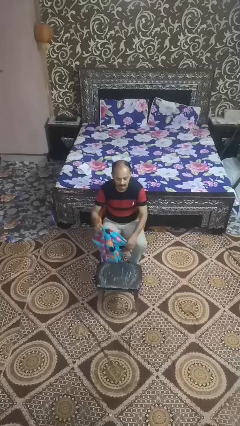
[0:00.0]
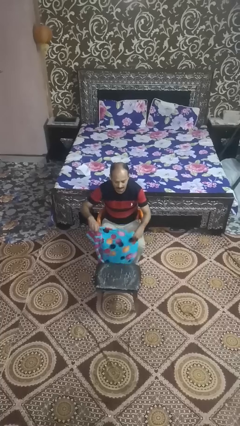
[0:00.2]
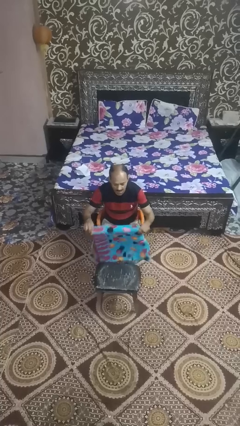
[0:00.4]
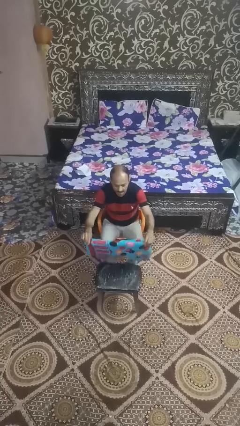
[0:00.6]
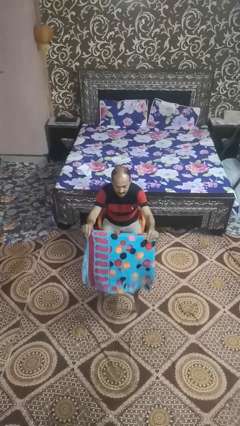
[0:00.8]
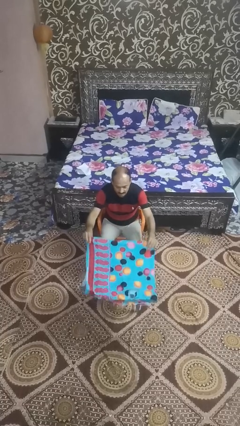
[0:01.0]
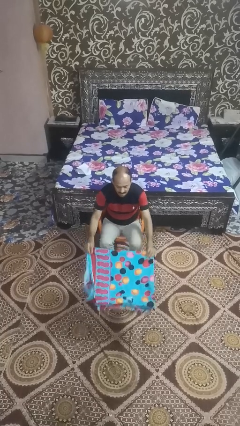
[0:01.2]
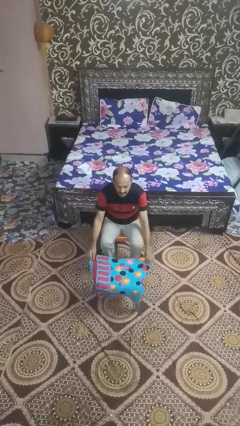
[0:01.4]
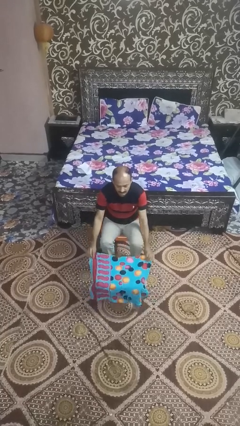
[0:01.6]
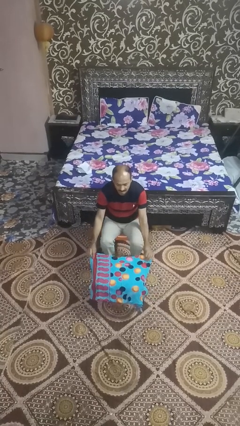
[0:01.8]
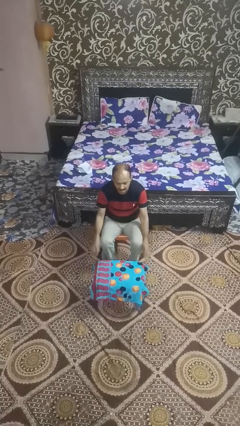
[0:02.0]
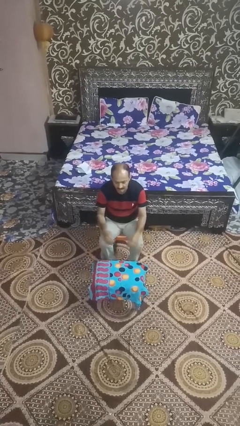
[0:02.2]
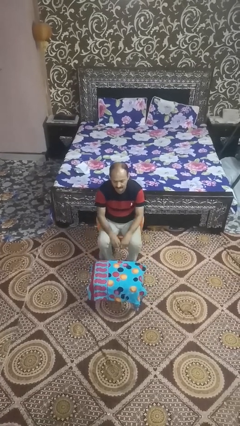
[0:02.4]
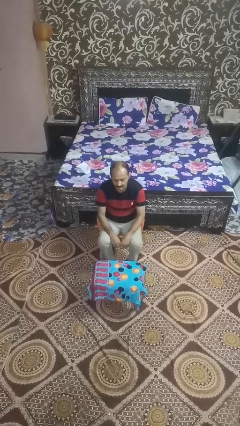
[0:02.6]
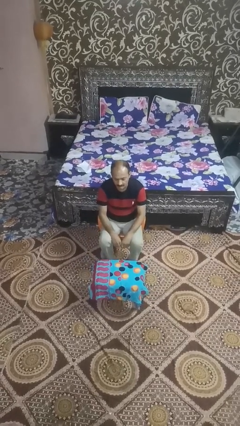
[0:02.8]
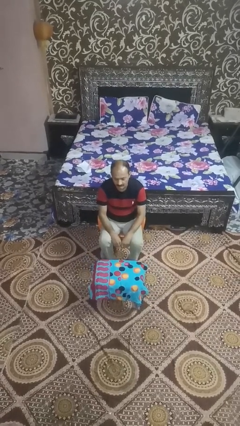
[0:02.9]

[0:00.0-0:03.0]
person spreads tablecloth

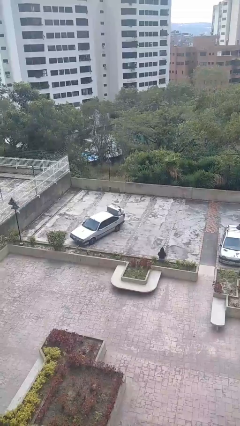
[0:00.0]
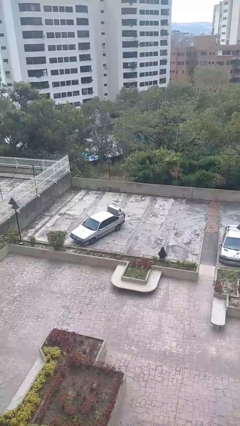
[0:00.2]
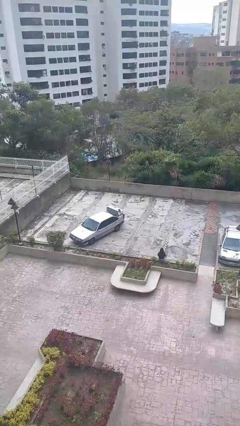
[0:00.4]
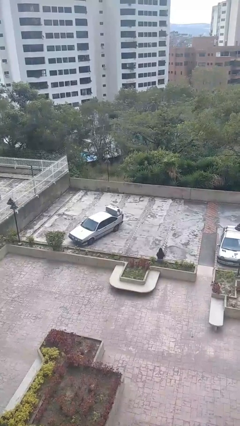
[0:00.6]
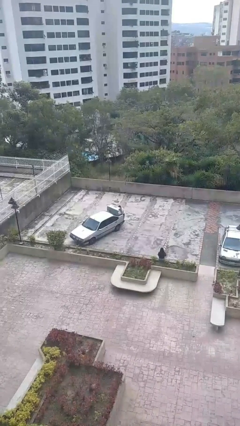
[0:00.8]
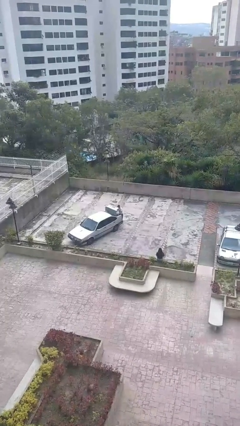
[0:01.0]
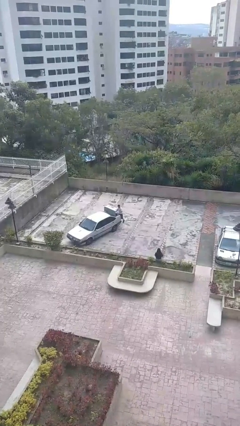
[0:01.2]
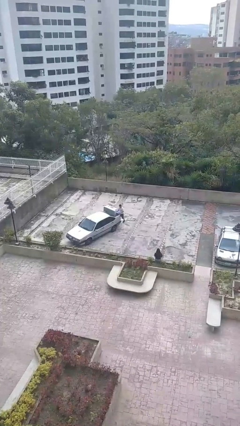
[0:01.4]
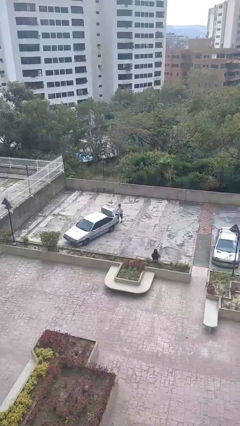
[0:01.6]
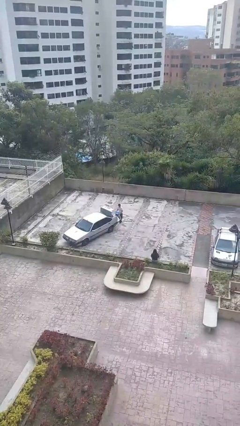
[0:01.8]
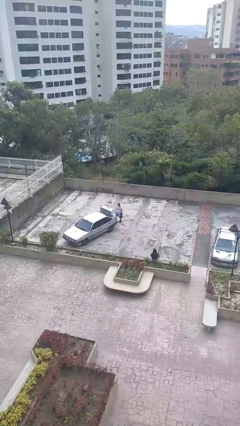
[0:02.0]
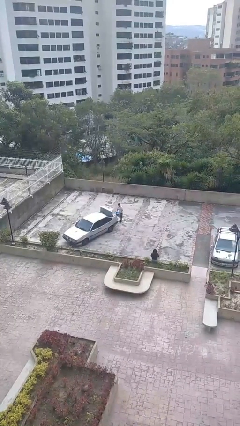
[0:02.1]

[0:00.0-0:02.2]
person unloads car

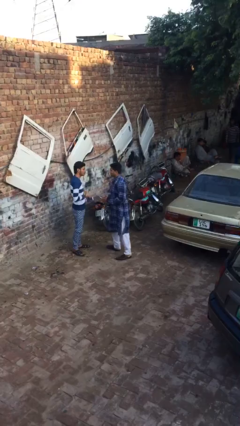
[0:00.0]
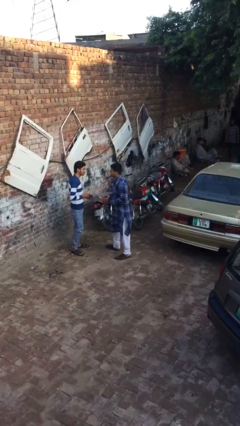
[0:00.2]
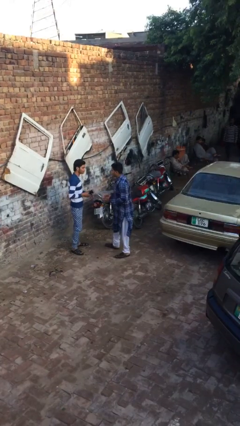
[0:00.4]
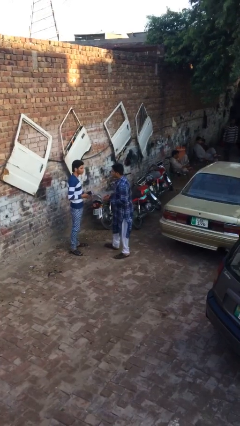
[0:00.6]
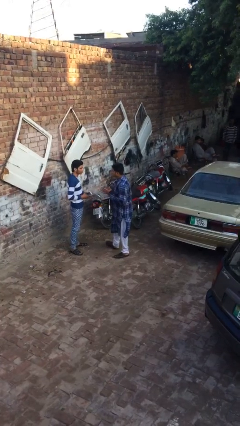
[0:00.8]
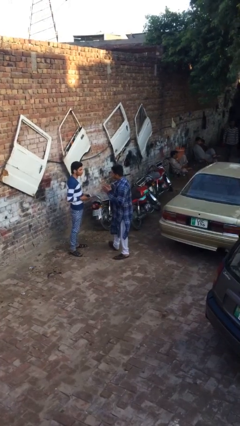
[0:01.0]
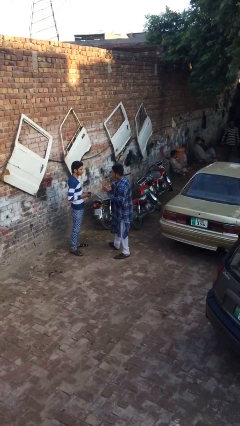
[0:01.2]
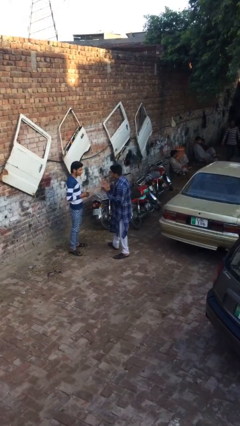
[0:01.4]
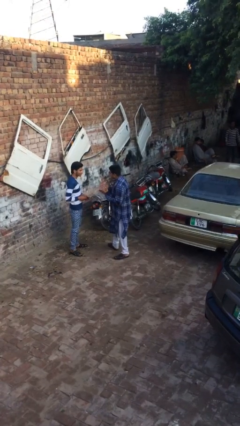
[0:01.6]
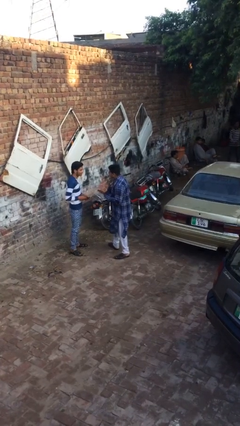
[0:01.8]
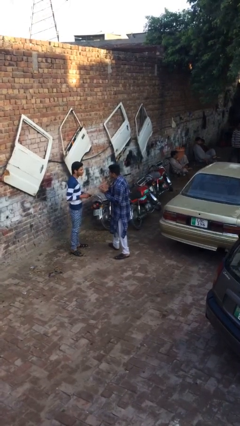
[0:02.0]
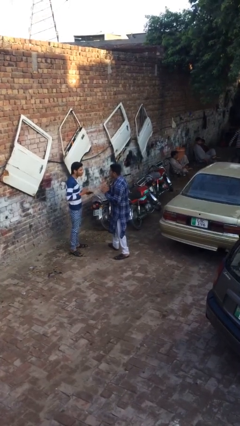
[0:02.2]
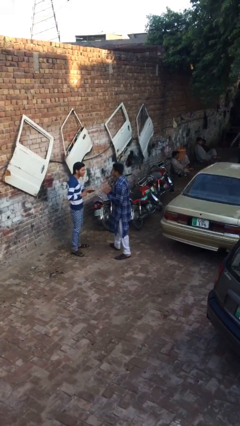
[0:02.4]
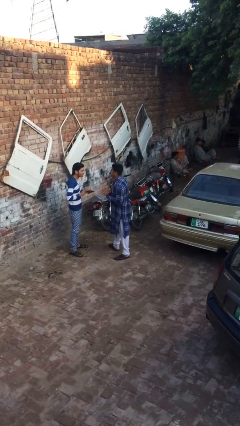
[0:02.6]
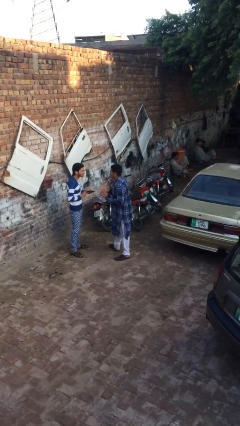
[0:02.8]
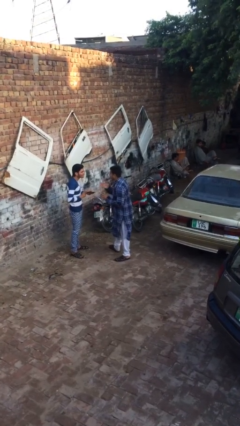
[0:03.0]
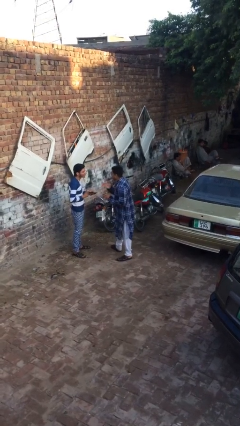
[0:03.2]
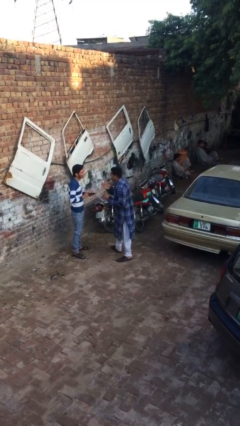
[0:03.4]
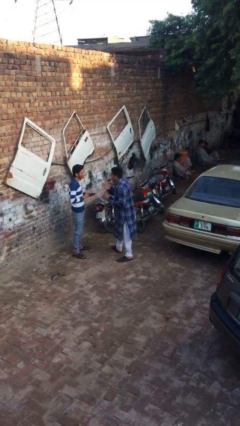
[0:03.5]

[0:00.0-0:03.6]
person talks to person

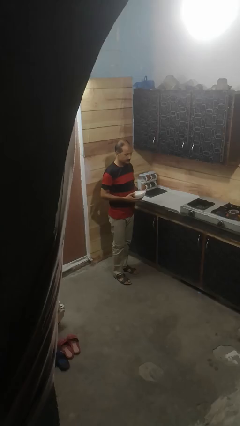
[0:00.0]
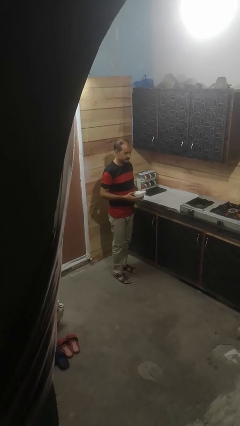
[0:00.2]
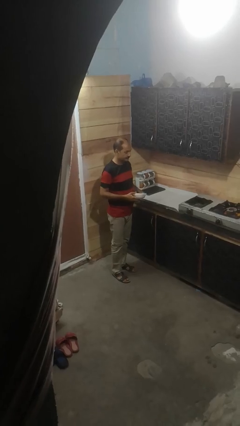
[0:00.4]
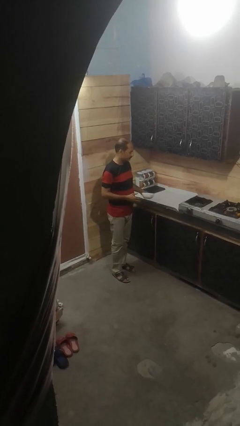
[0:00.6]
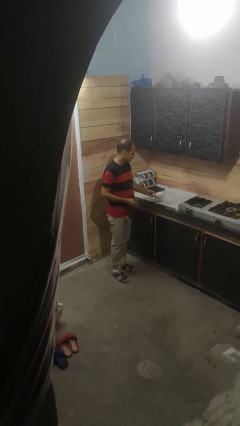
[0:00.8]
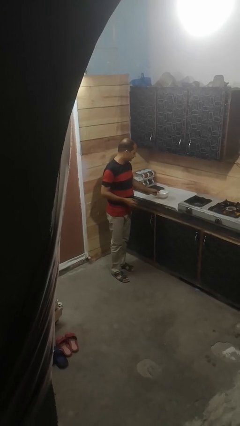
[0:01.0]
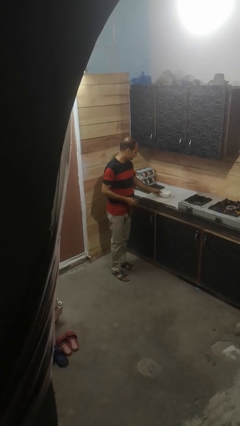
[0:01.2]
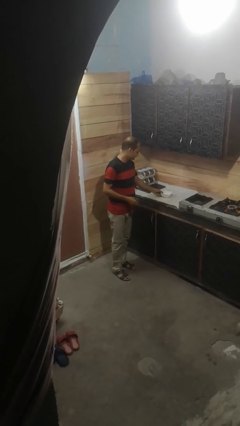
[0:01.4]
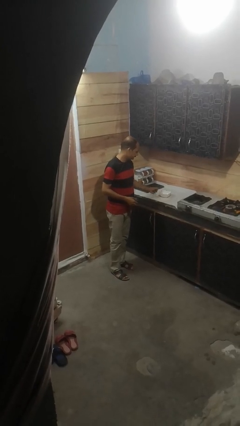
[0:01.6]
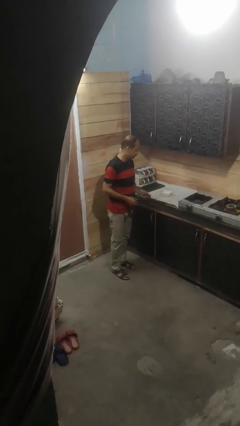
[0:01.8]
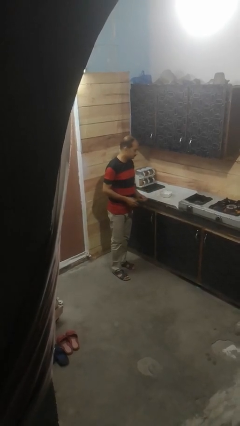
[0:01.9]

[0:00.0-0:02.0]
person puts down object on countertop

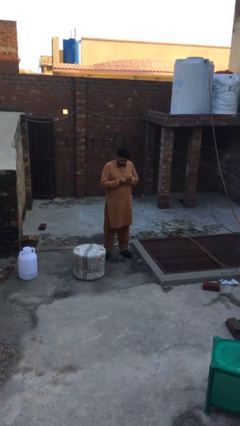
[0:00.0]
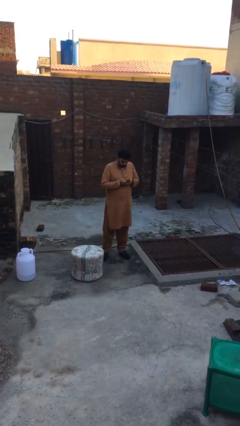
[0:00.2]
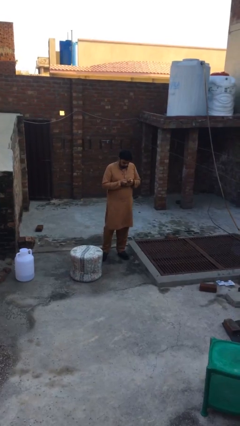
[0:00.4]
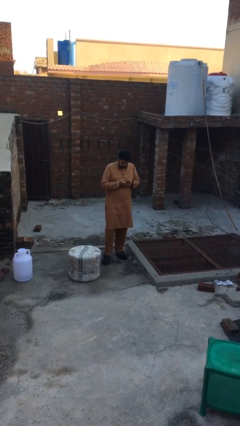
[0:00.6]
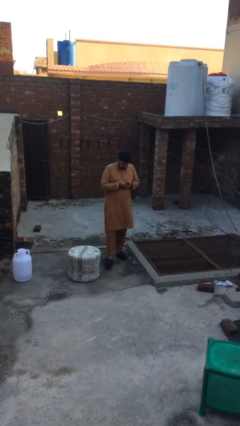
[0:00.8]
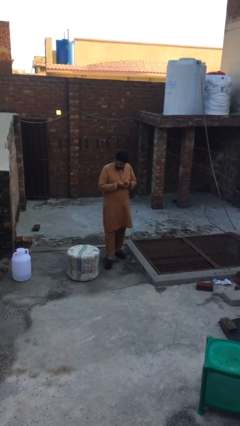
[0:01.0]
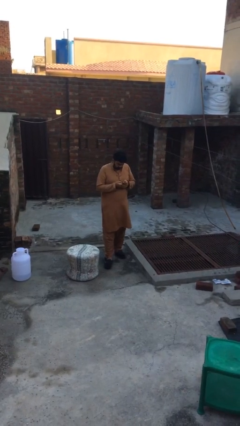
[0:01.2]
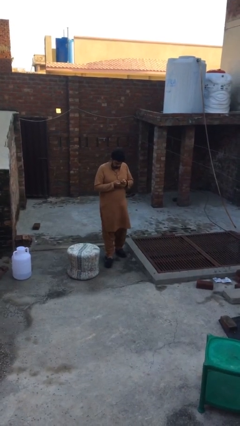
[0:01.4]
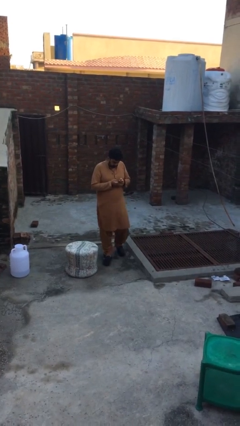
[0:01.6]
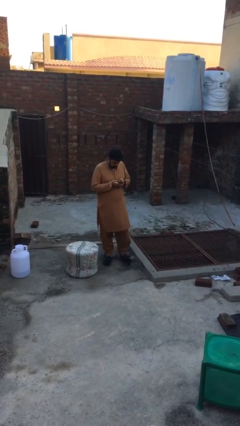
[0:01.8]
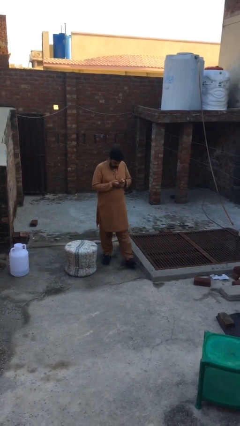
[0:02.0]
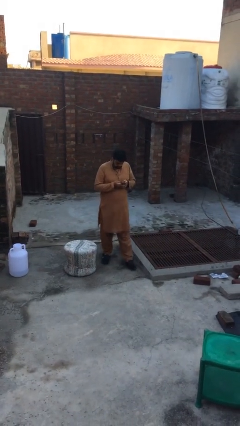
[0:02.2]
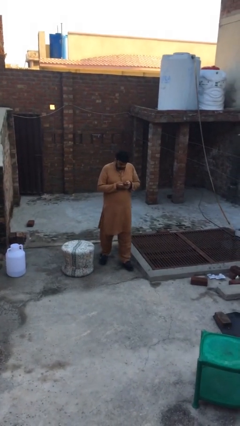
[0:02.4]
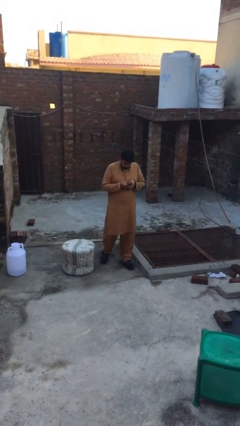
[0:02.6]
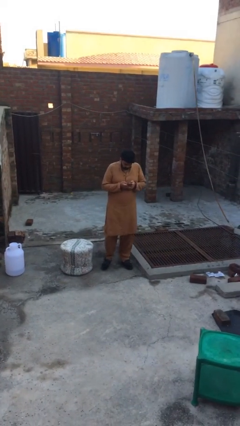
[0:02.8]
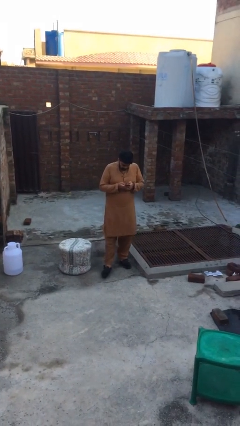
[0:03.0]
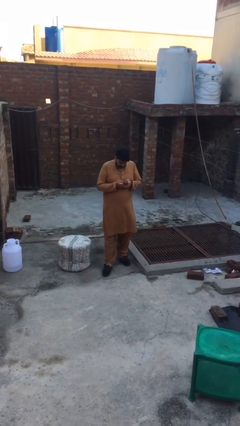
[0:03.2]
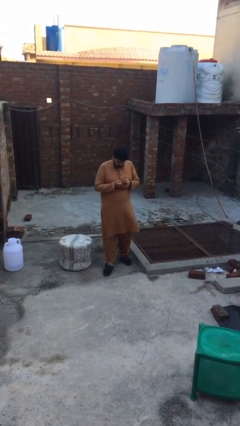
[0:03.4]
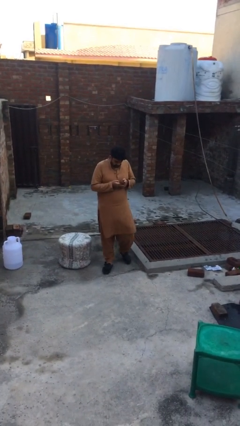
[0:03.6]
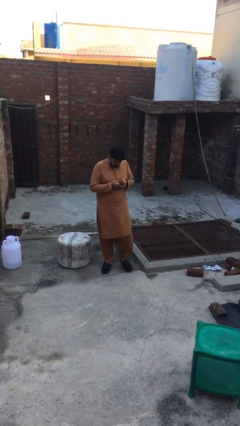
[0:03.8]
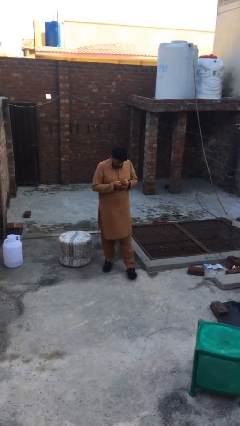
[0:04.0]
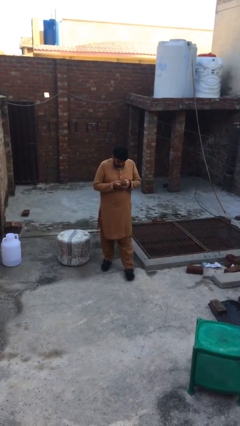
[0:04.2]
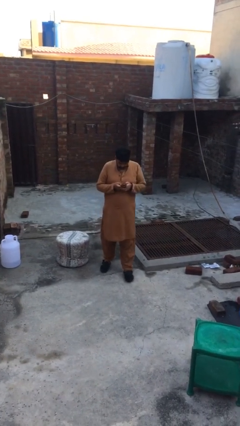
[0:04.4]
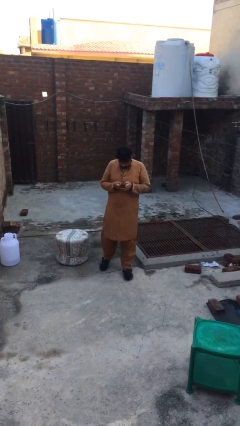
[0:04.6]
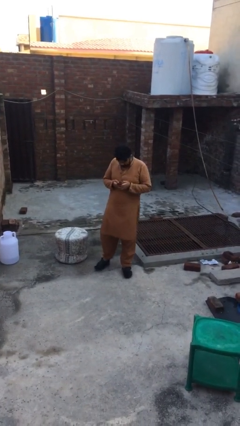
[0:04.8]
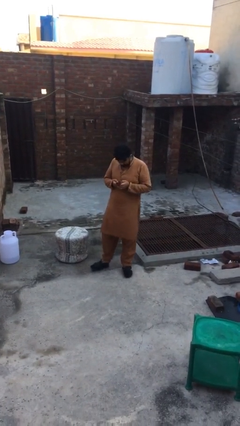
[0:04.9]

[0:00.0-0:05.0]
person texts on phone

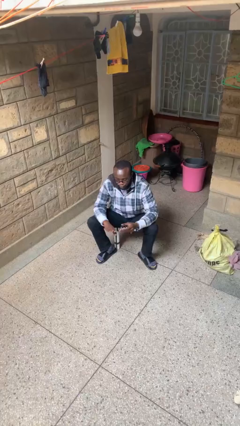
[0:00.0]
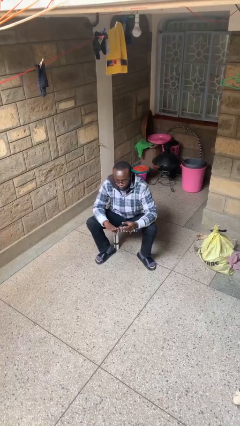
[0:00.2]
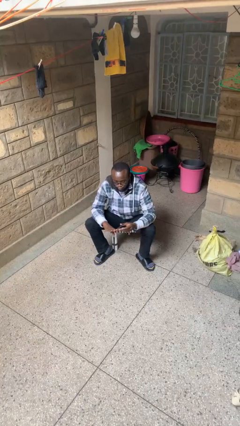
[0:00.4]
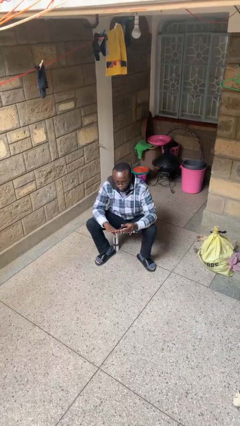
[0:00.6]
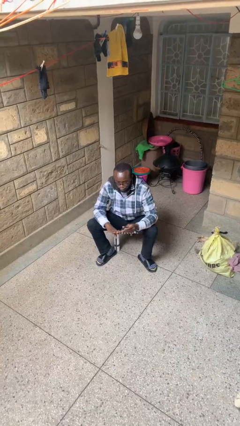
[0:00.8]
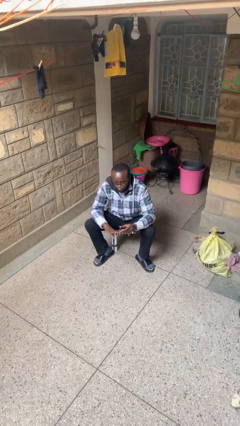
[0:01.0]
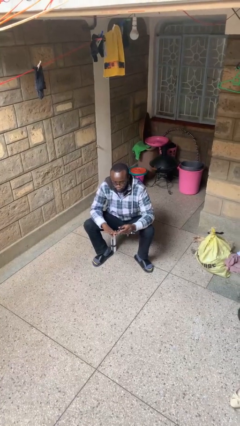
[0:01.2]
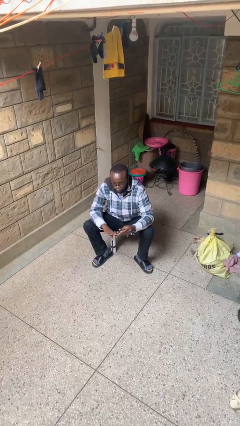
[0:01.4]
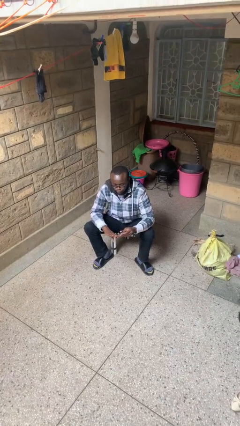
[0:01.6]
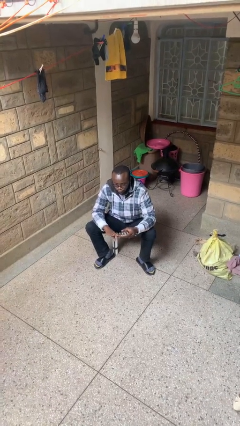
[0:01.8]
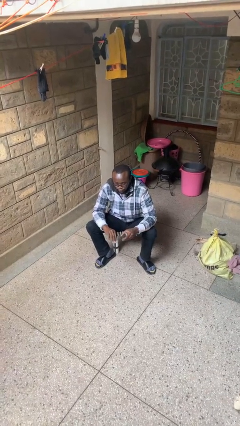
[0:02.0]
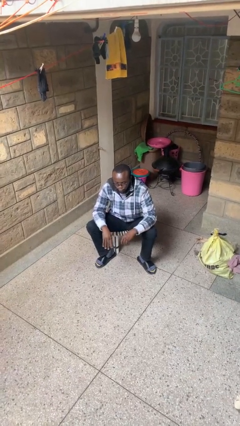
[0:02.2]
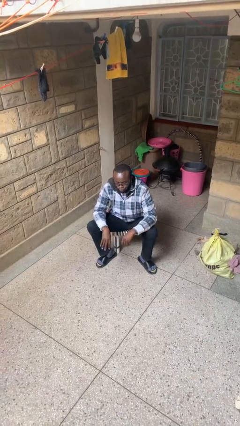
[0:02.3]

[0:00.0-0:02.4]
person clips fingernails
